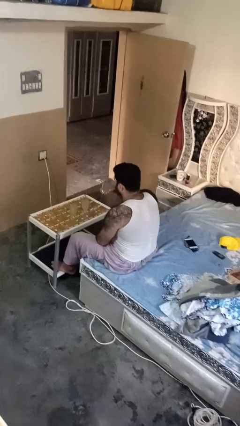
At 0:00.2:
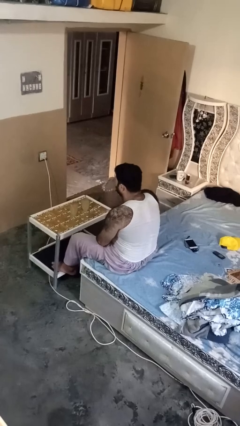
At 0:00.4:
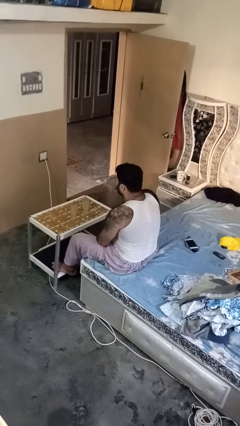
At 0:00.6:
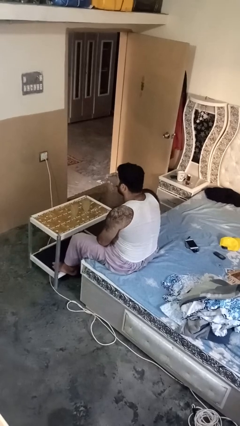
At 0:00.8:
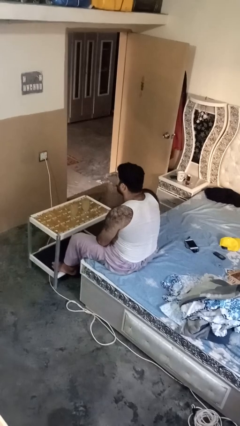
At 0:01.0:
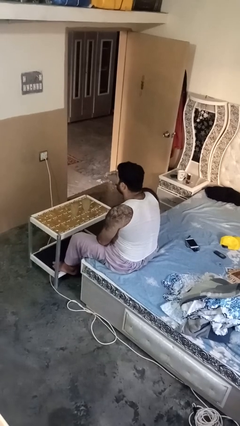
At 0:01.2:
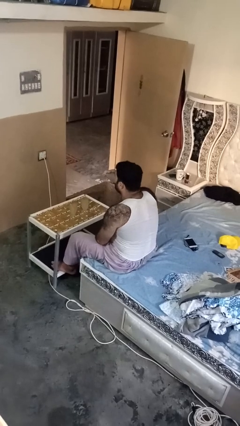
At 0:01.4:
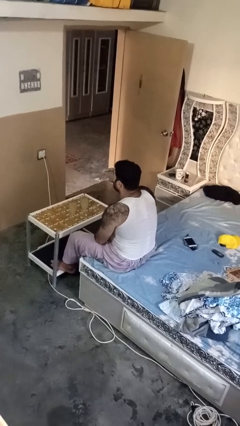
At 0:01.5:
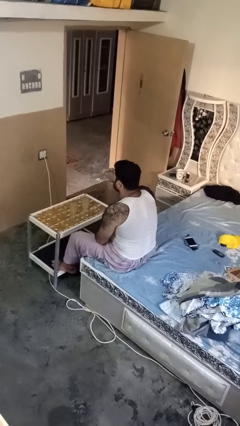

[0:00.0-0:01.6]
person drinks from shotglass

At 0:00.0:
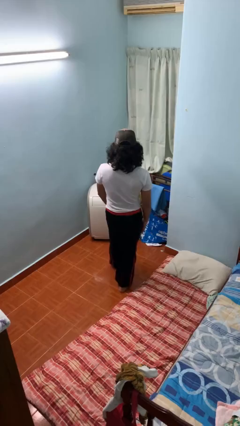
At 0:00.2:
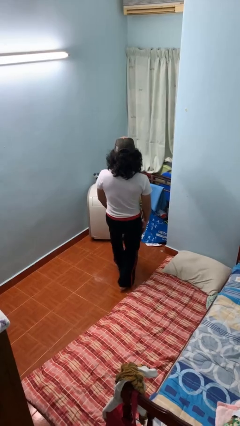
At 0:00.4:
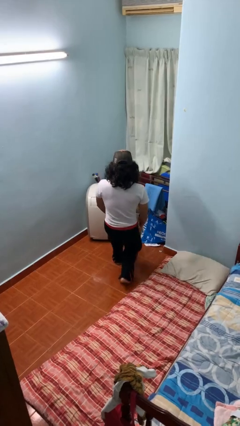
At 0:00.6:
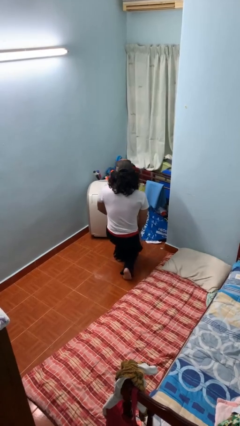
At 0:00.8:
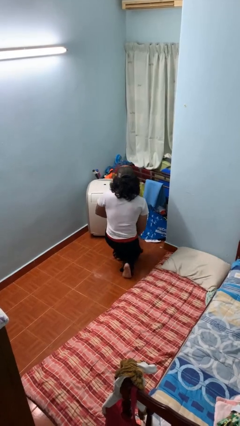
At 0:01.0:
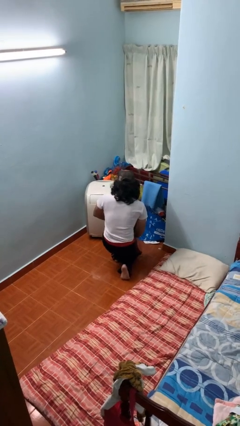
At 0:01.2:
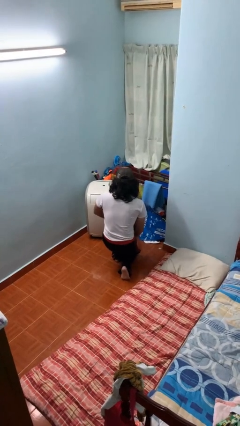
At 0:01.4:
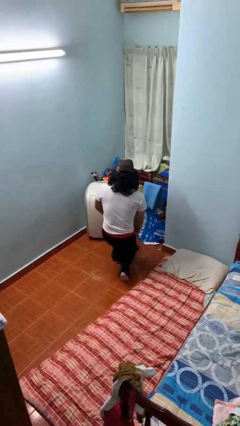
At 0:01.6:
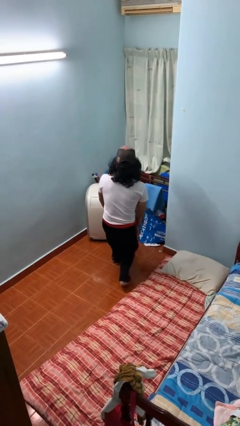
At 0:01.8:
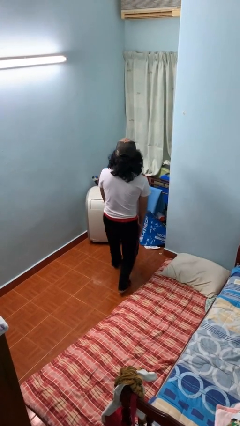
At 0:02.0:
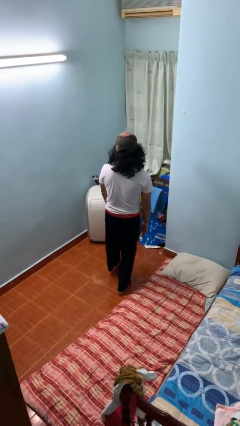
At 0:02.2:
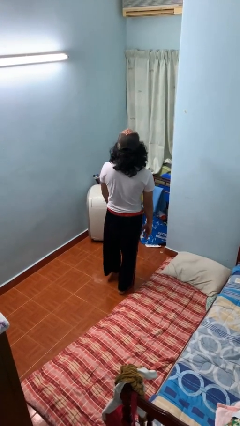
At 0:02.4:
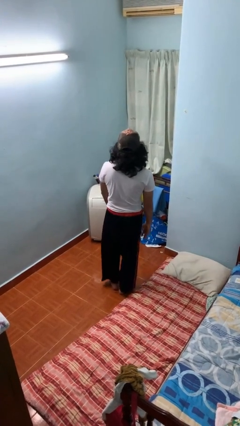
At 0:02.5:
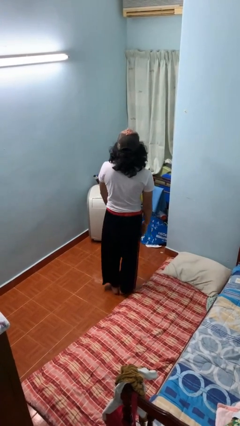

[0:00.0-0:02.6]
person exercises with lunges

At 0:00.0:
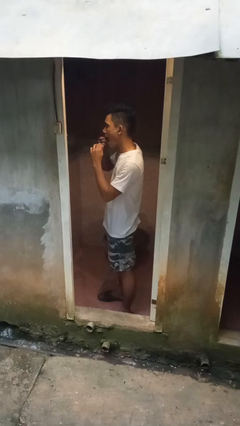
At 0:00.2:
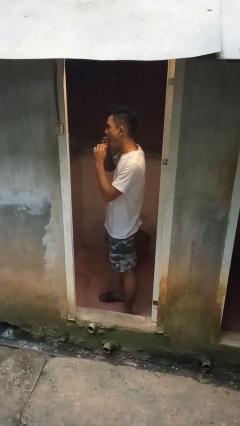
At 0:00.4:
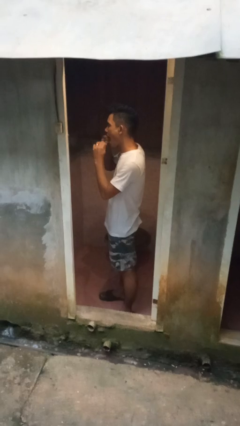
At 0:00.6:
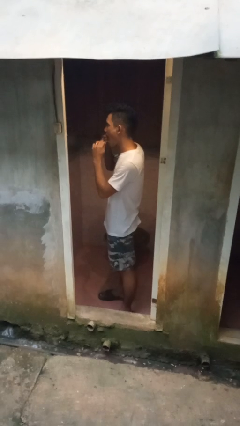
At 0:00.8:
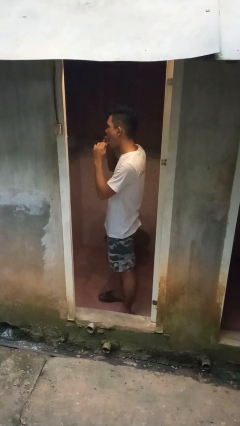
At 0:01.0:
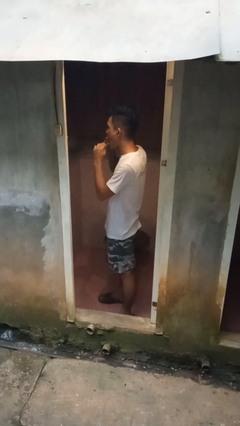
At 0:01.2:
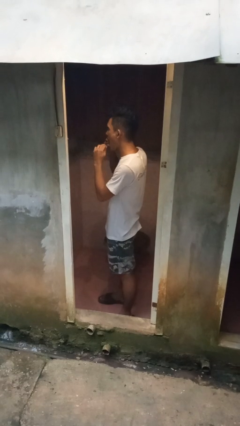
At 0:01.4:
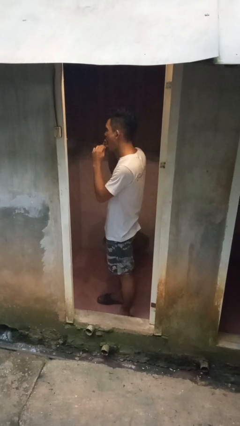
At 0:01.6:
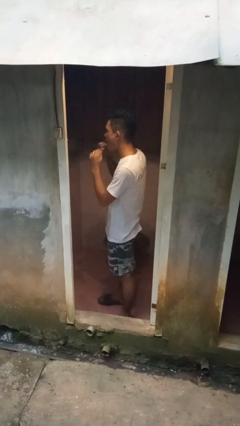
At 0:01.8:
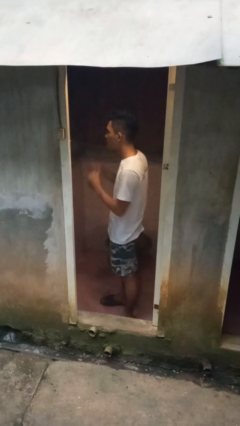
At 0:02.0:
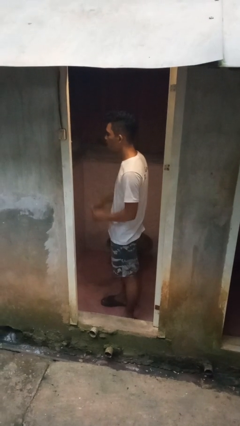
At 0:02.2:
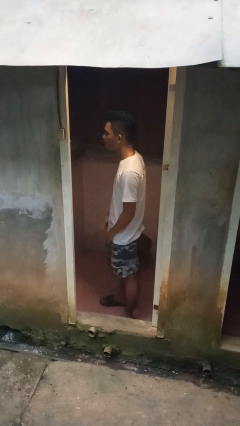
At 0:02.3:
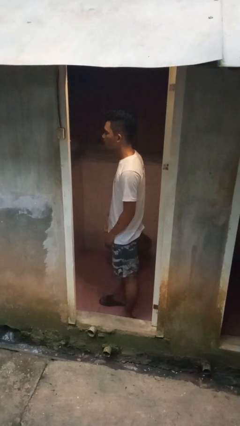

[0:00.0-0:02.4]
person flosses

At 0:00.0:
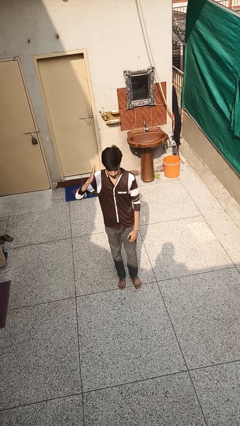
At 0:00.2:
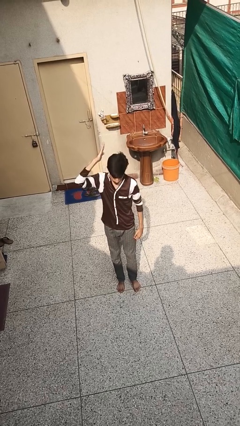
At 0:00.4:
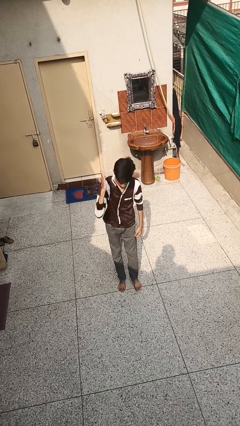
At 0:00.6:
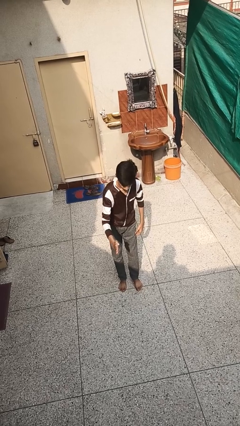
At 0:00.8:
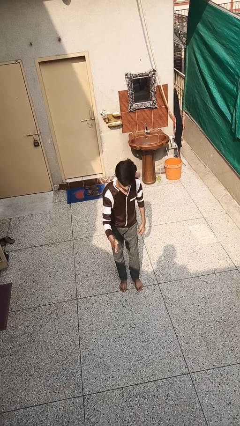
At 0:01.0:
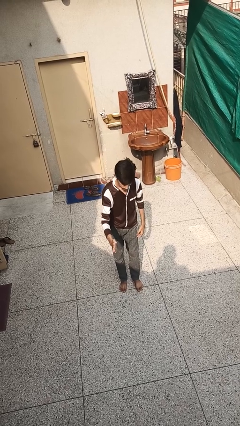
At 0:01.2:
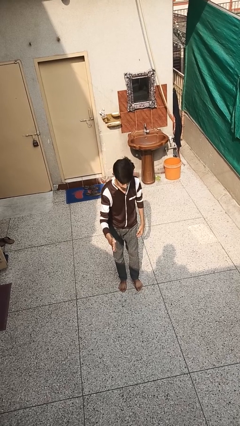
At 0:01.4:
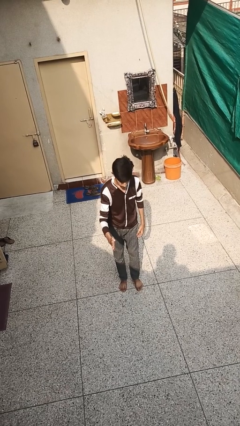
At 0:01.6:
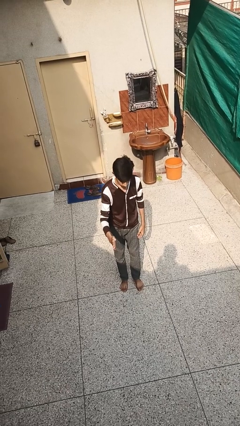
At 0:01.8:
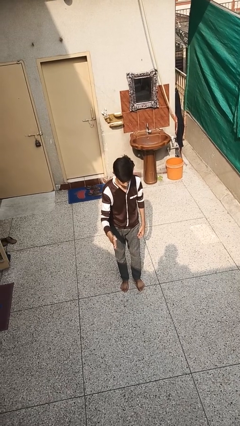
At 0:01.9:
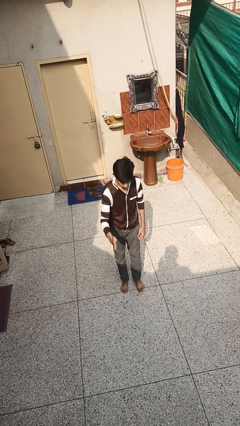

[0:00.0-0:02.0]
person karate chop

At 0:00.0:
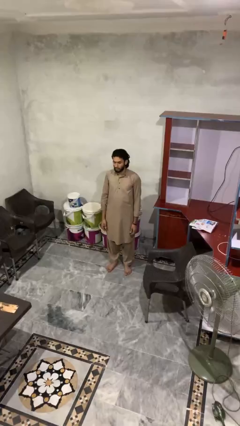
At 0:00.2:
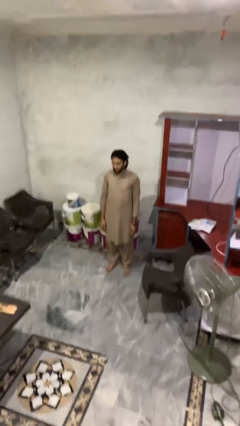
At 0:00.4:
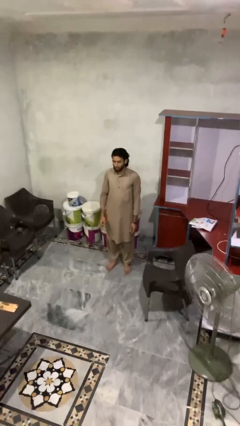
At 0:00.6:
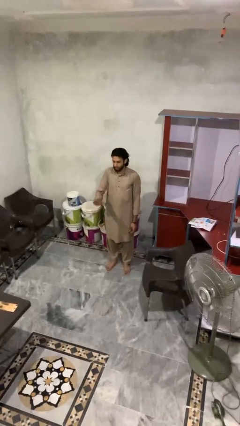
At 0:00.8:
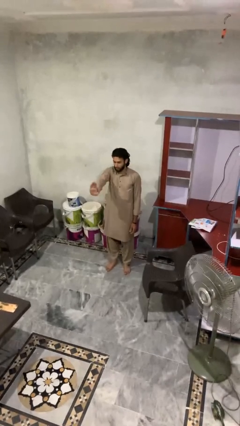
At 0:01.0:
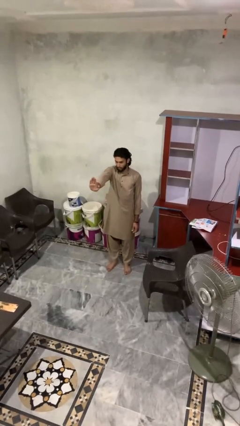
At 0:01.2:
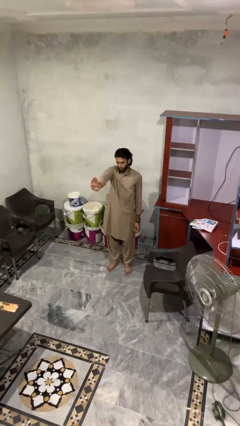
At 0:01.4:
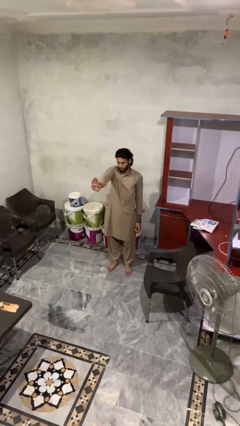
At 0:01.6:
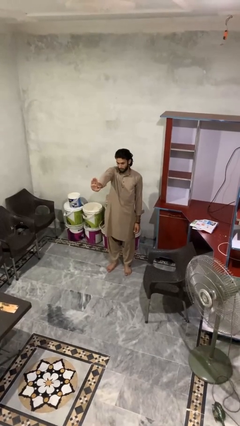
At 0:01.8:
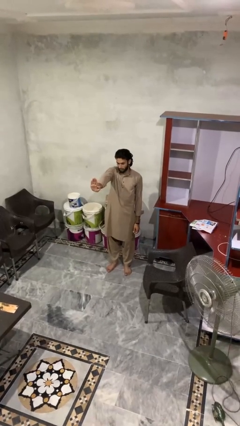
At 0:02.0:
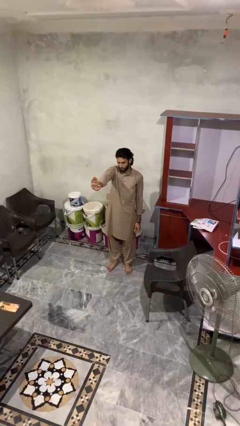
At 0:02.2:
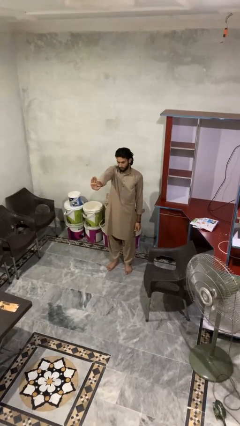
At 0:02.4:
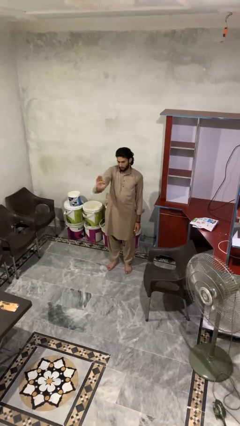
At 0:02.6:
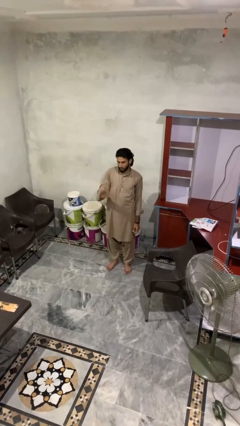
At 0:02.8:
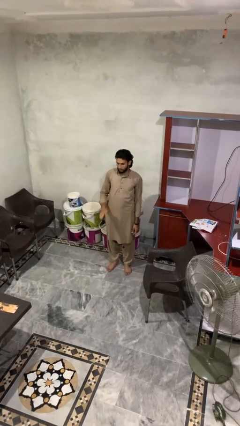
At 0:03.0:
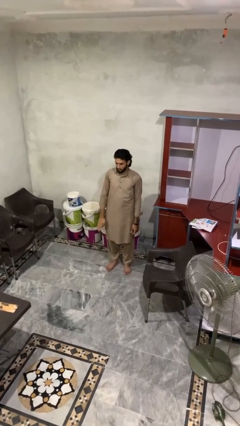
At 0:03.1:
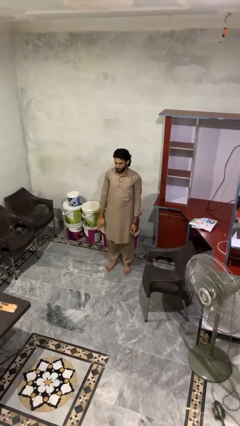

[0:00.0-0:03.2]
person gestures stop

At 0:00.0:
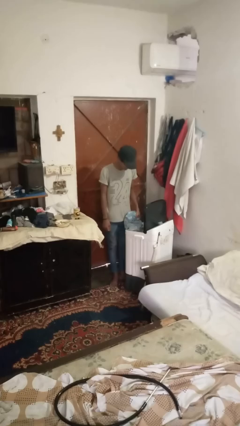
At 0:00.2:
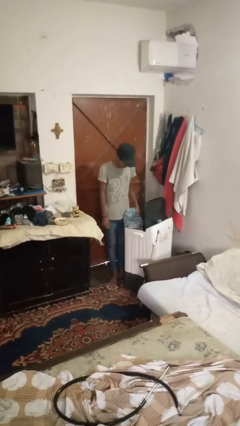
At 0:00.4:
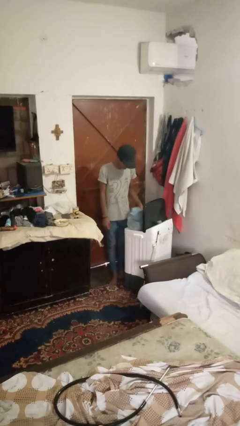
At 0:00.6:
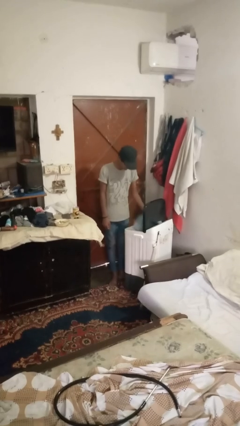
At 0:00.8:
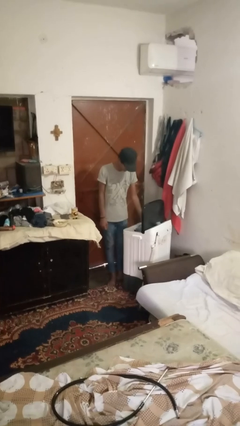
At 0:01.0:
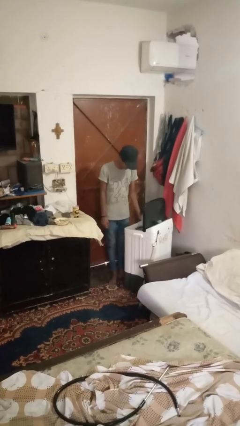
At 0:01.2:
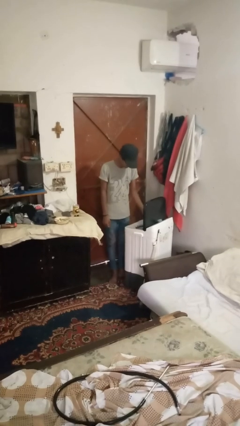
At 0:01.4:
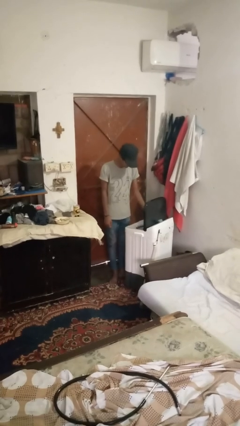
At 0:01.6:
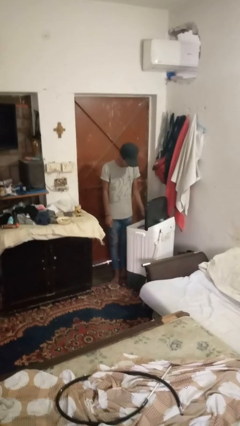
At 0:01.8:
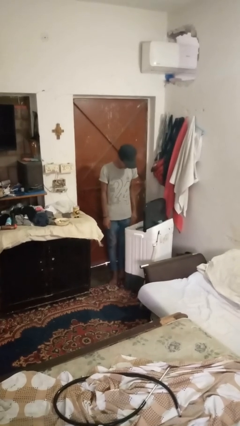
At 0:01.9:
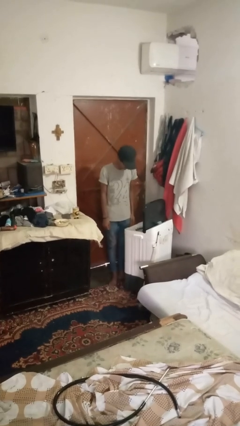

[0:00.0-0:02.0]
person loads clotheswasher

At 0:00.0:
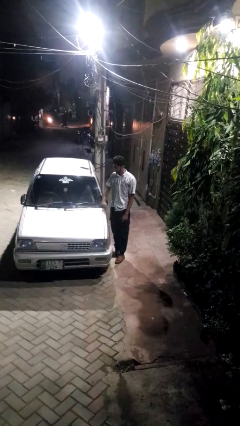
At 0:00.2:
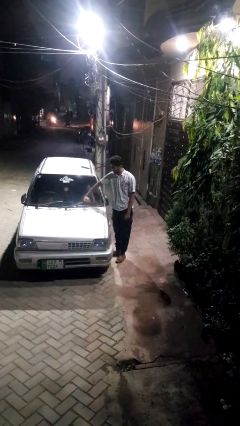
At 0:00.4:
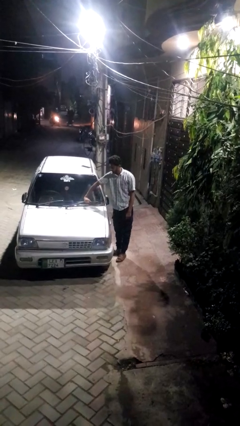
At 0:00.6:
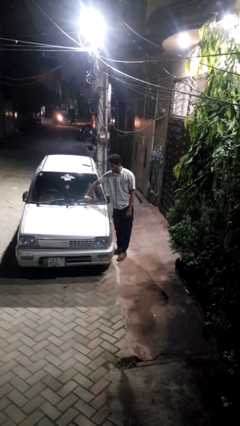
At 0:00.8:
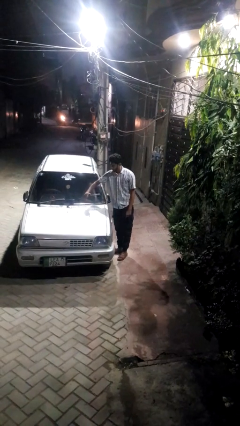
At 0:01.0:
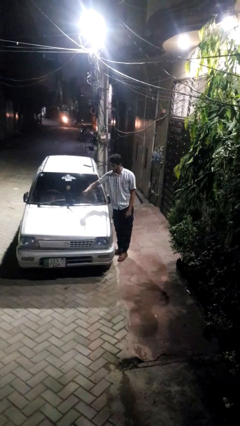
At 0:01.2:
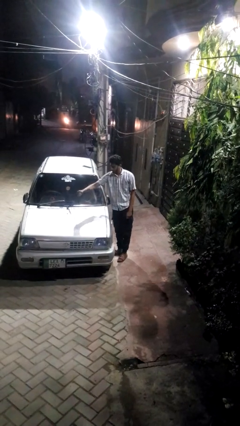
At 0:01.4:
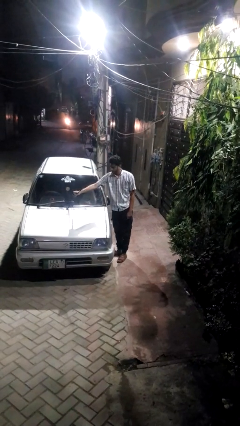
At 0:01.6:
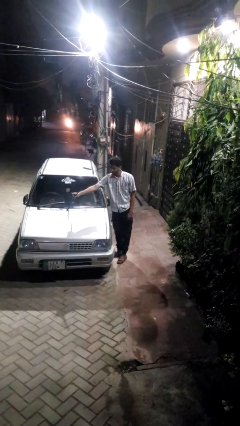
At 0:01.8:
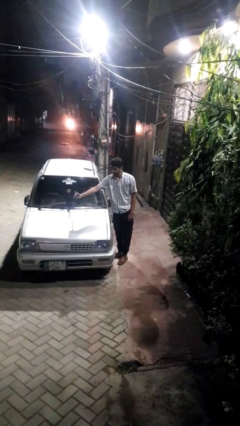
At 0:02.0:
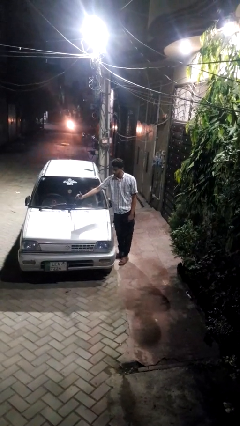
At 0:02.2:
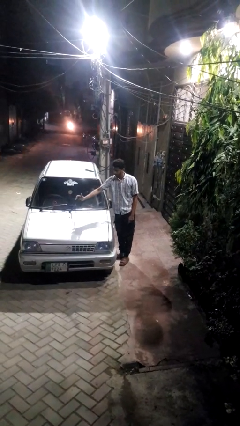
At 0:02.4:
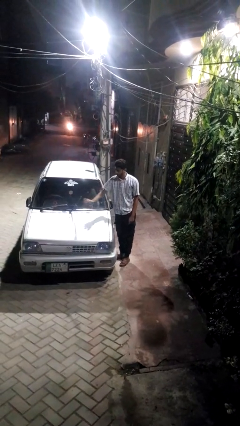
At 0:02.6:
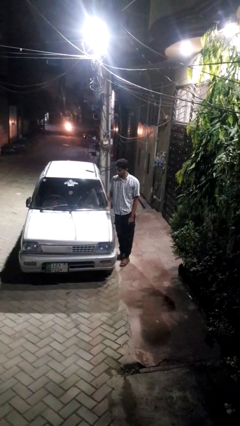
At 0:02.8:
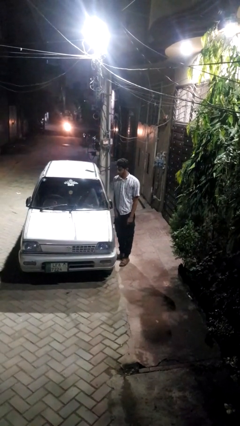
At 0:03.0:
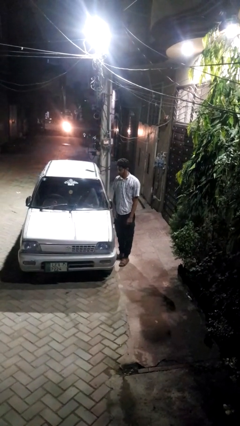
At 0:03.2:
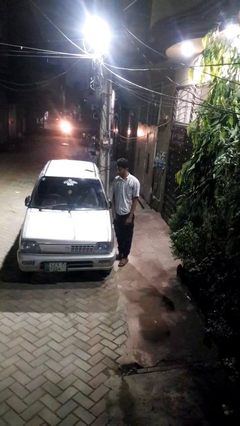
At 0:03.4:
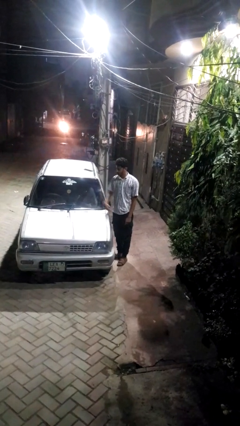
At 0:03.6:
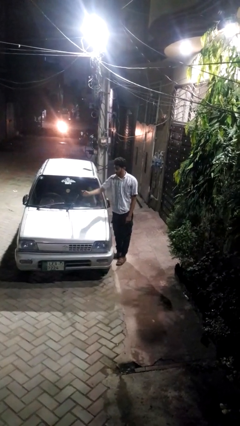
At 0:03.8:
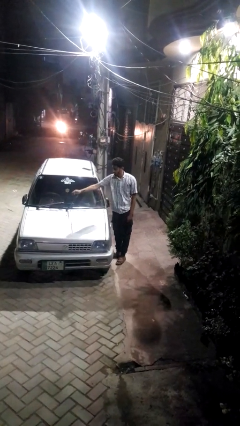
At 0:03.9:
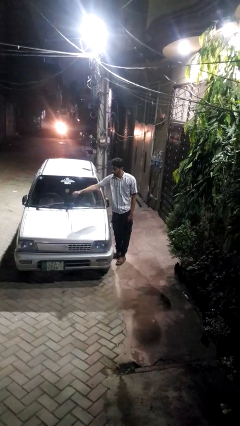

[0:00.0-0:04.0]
person flips up car wipers
